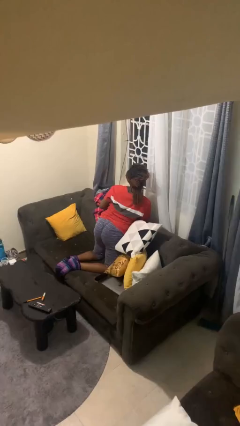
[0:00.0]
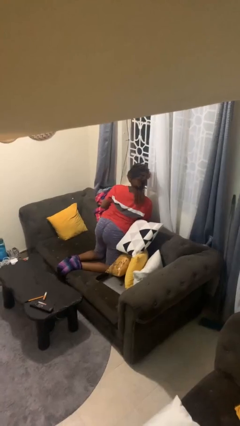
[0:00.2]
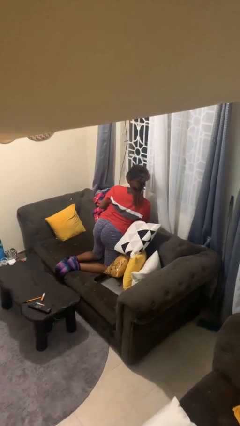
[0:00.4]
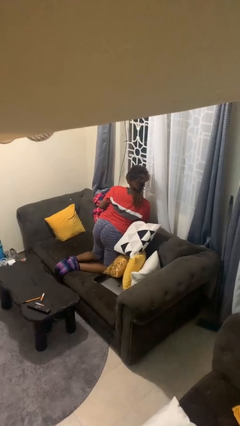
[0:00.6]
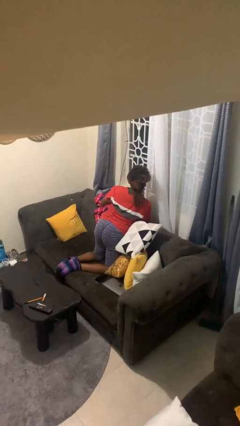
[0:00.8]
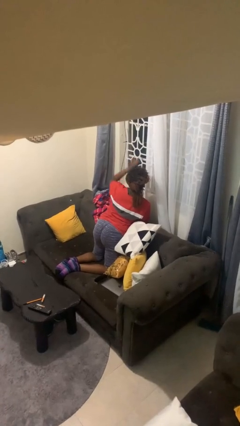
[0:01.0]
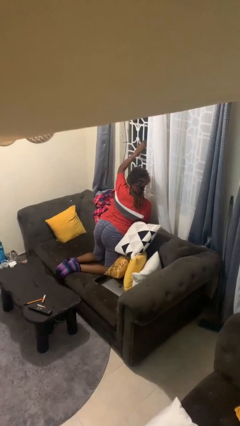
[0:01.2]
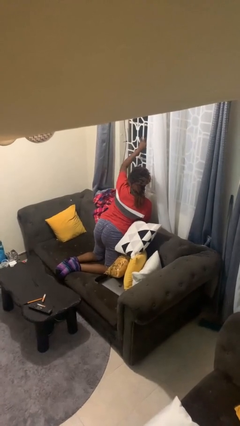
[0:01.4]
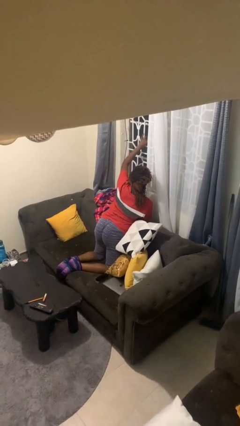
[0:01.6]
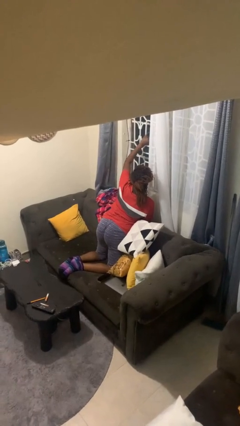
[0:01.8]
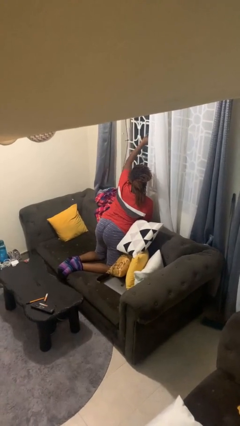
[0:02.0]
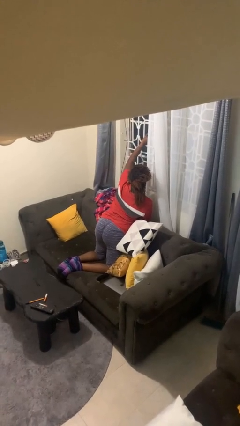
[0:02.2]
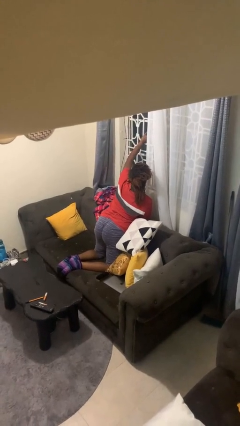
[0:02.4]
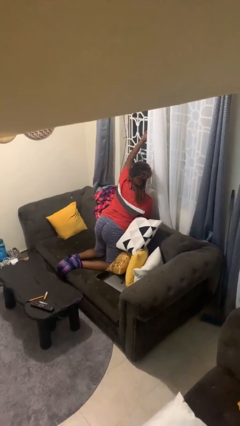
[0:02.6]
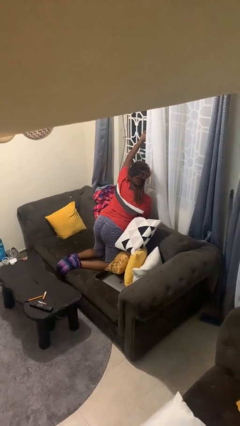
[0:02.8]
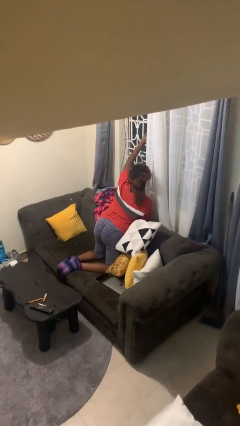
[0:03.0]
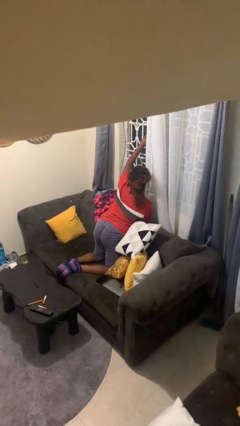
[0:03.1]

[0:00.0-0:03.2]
person opens home window

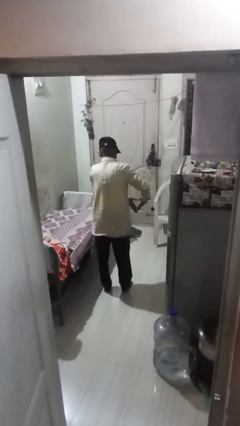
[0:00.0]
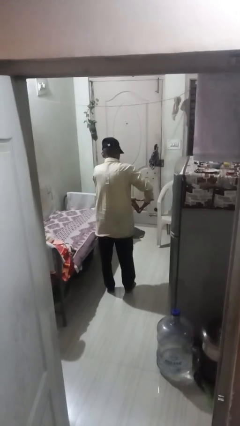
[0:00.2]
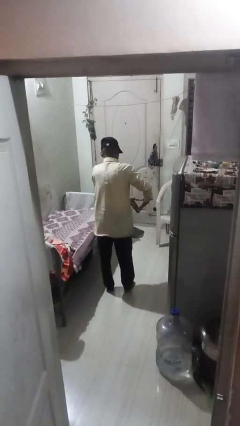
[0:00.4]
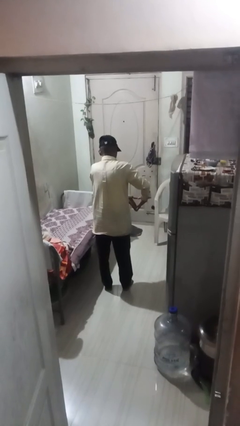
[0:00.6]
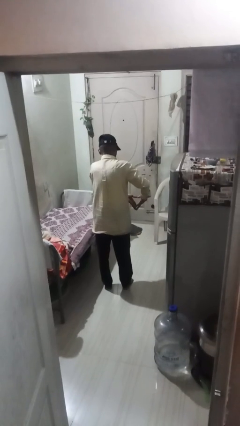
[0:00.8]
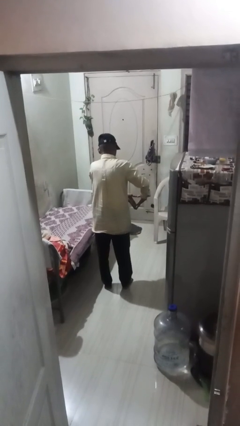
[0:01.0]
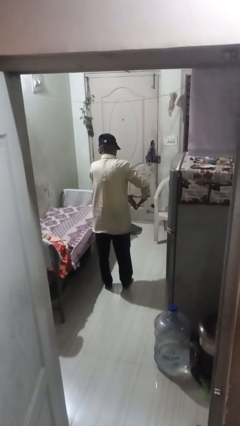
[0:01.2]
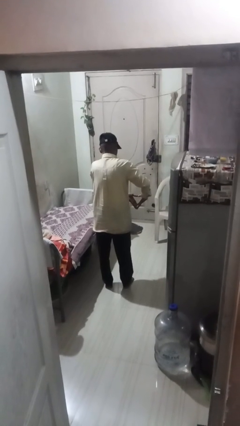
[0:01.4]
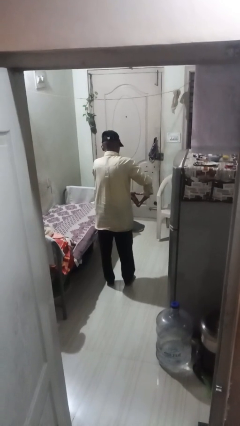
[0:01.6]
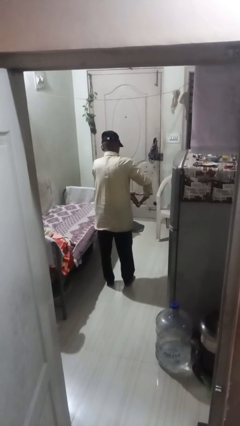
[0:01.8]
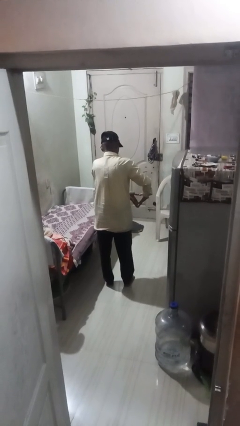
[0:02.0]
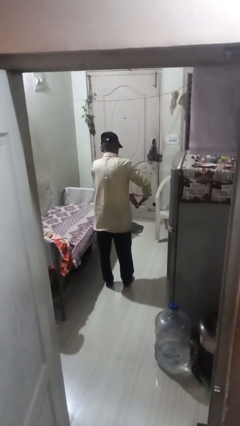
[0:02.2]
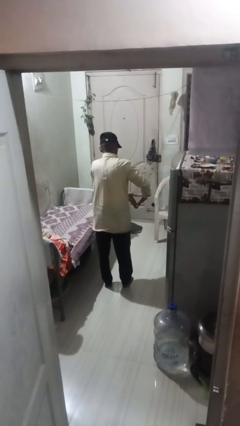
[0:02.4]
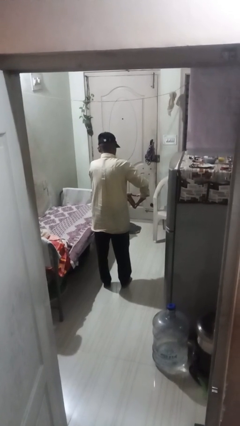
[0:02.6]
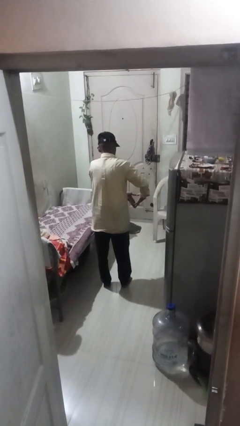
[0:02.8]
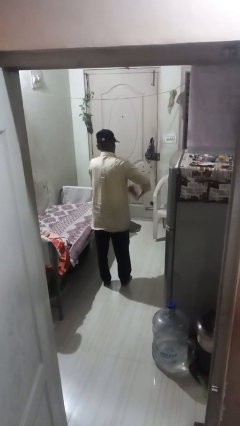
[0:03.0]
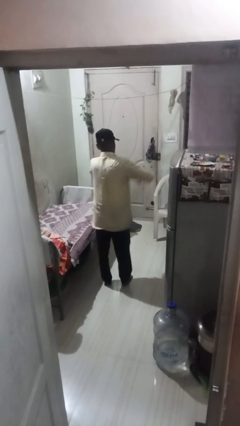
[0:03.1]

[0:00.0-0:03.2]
person gestures heart

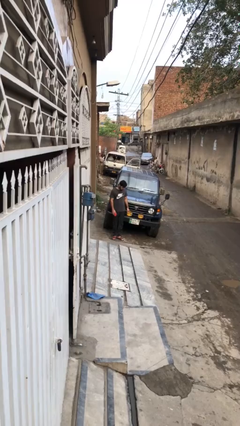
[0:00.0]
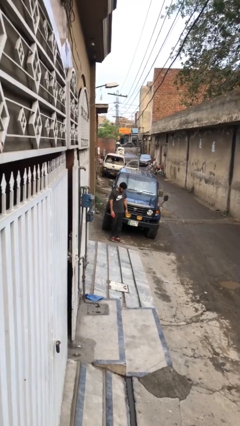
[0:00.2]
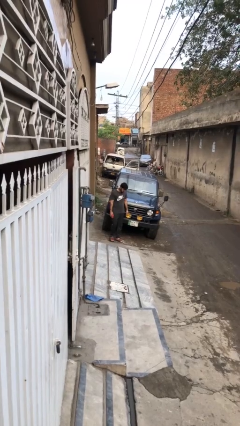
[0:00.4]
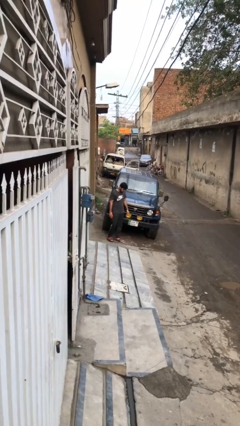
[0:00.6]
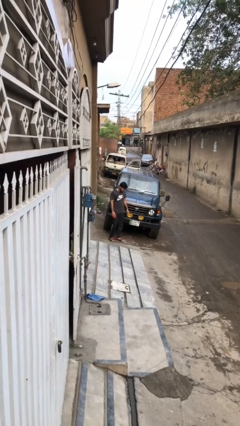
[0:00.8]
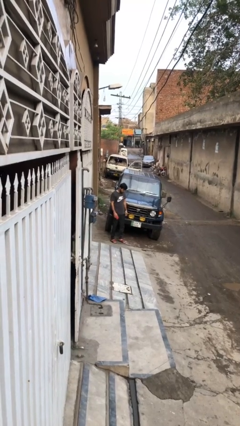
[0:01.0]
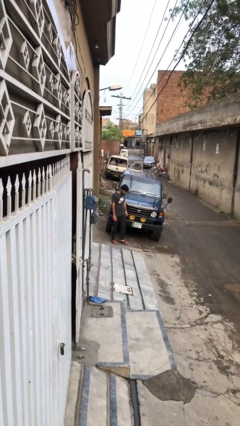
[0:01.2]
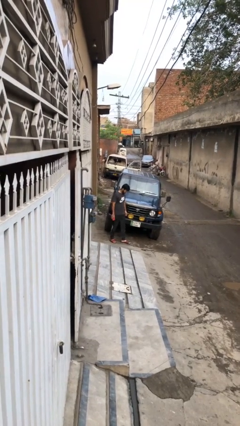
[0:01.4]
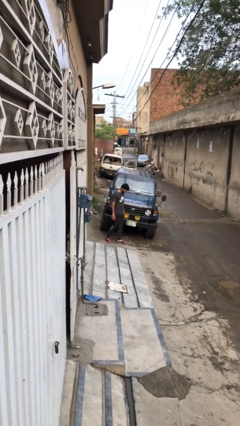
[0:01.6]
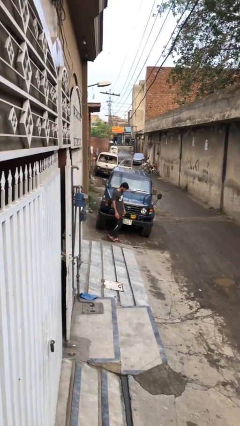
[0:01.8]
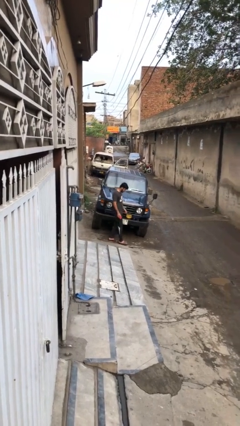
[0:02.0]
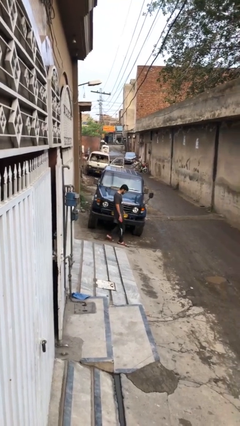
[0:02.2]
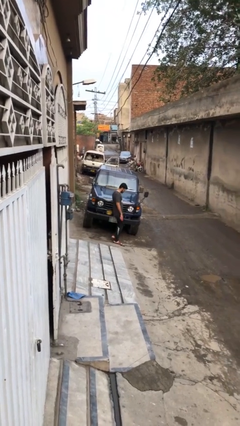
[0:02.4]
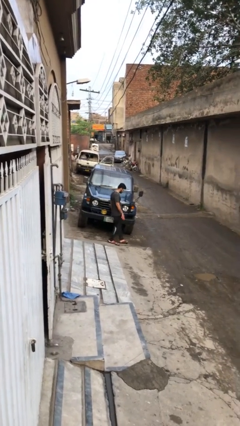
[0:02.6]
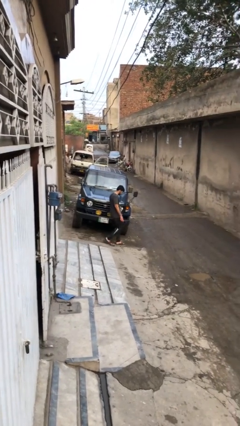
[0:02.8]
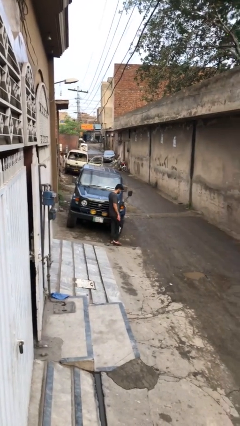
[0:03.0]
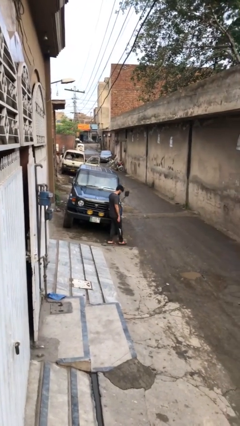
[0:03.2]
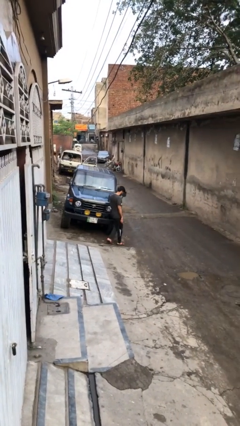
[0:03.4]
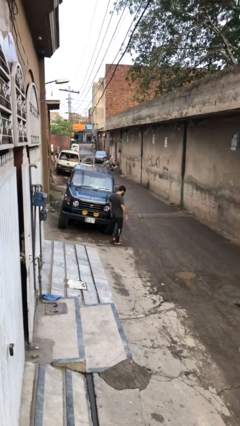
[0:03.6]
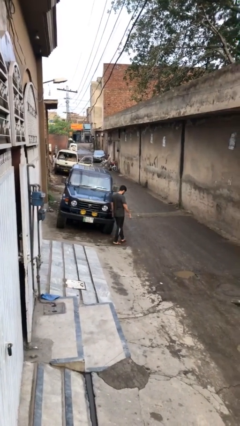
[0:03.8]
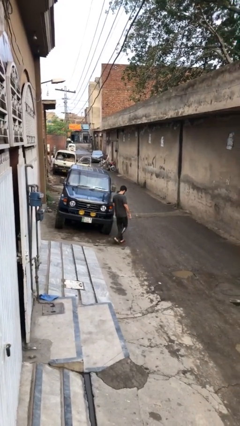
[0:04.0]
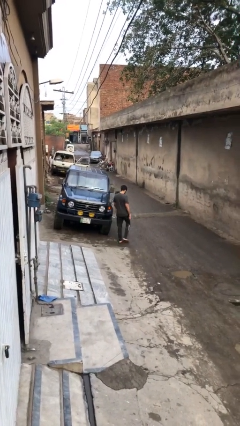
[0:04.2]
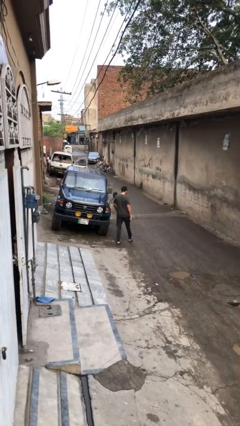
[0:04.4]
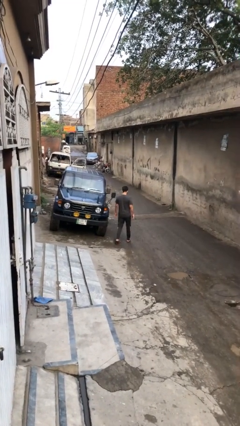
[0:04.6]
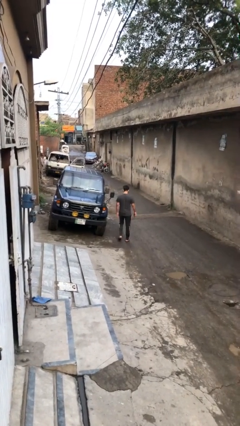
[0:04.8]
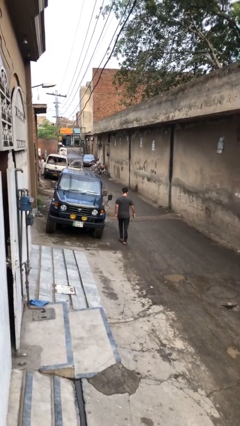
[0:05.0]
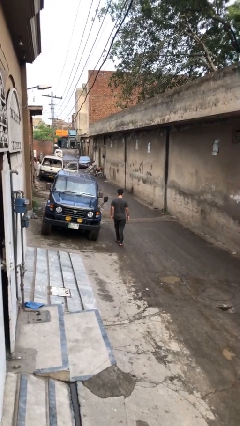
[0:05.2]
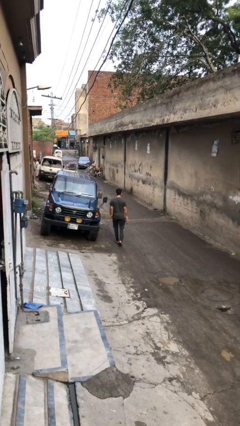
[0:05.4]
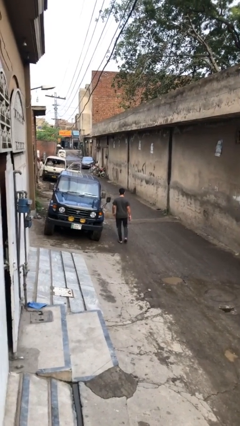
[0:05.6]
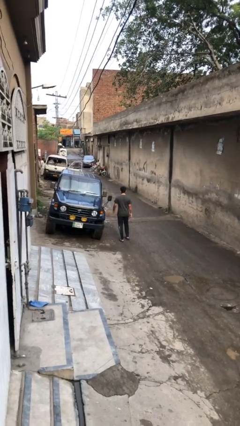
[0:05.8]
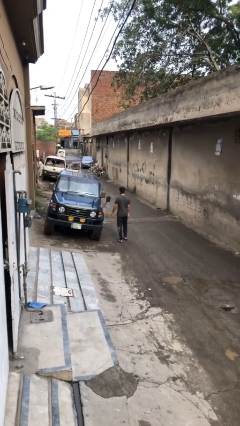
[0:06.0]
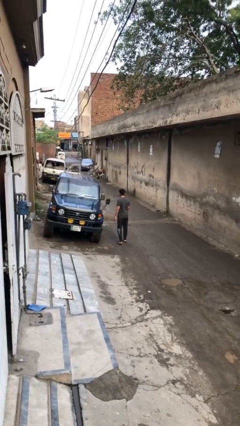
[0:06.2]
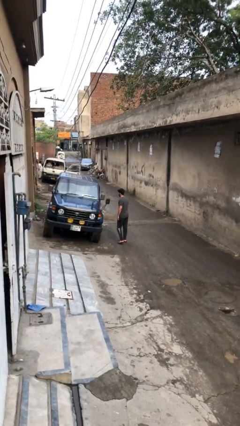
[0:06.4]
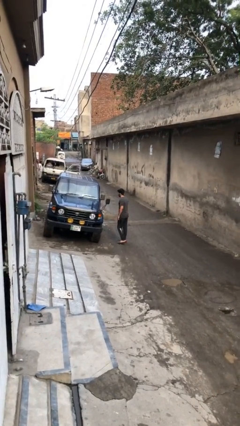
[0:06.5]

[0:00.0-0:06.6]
person walks around car

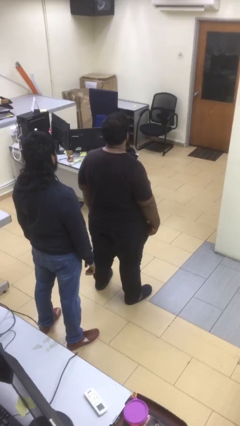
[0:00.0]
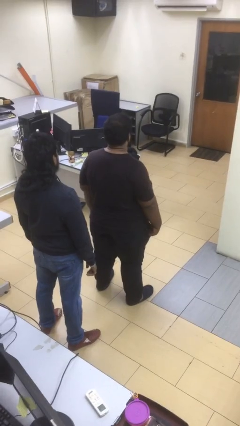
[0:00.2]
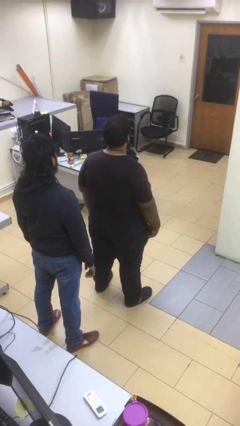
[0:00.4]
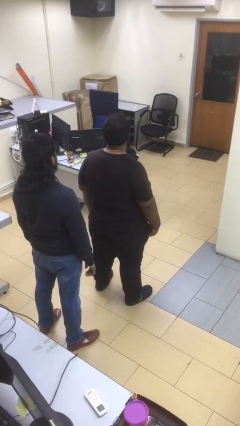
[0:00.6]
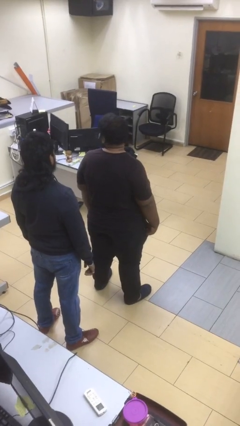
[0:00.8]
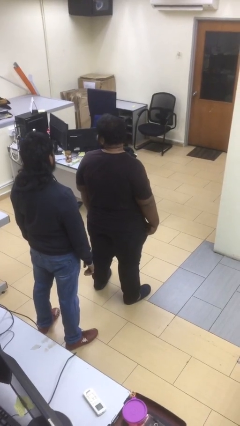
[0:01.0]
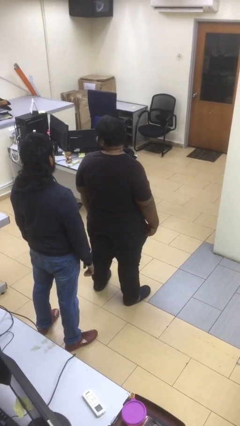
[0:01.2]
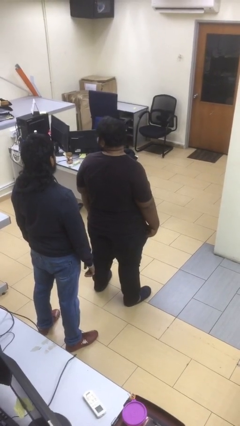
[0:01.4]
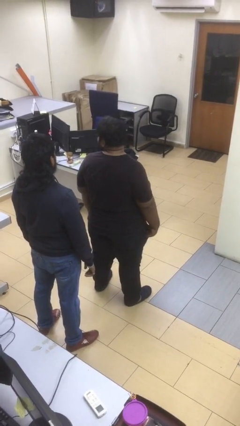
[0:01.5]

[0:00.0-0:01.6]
person looks over shoulder

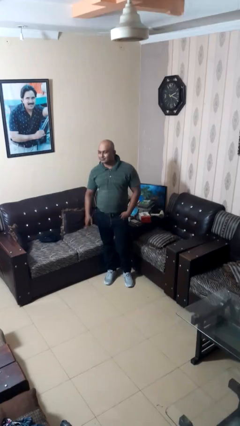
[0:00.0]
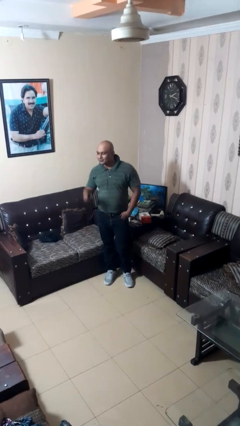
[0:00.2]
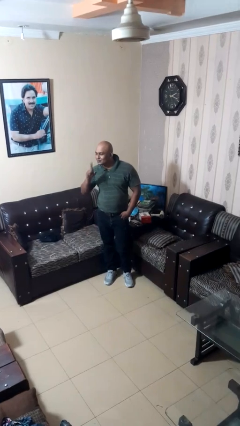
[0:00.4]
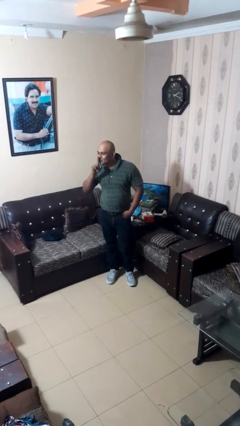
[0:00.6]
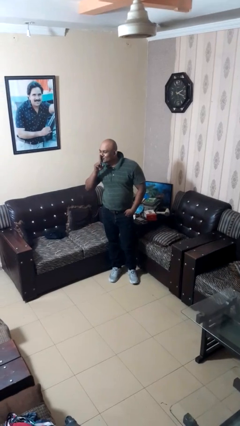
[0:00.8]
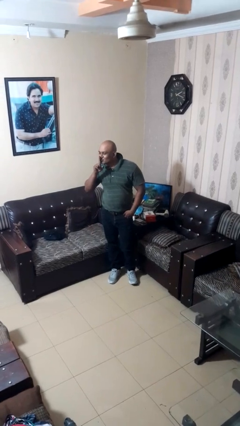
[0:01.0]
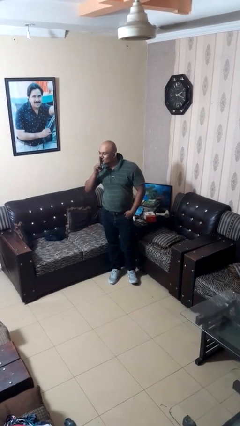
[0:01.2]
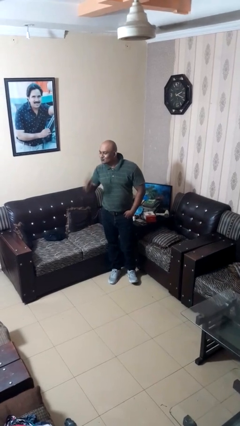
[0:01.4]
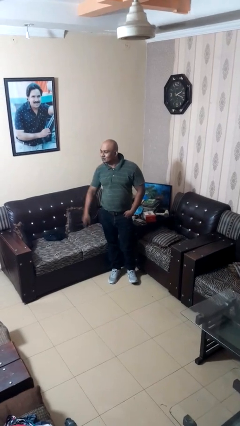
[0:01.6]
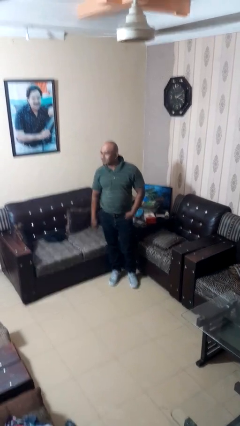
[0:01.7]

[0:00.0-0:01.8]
person gestures be quiet

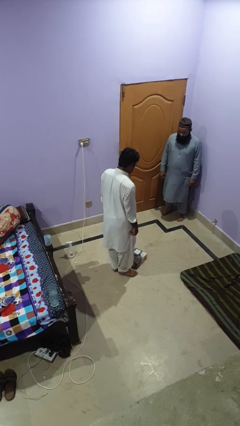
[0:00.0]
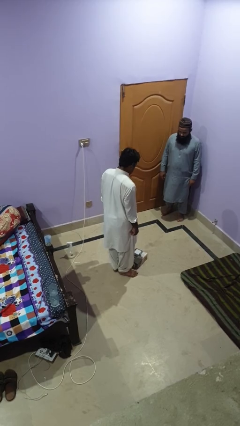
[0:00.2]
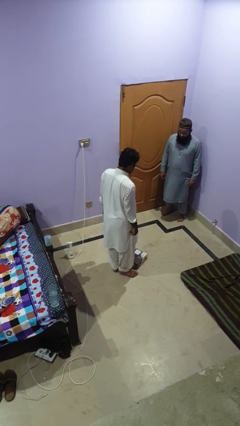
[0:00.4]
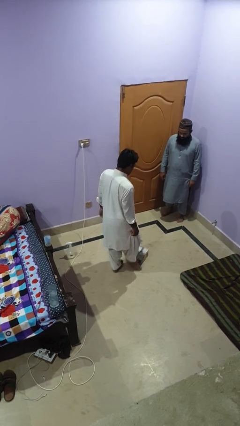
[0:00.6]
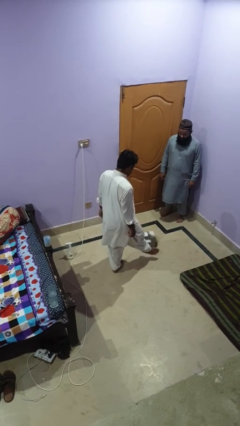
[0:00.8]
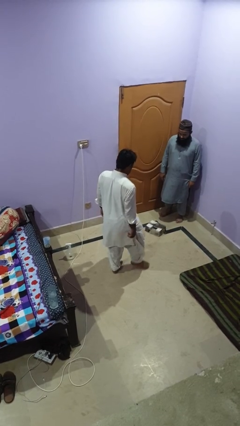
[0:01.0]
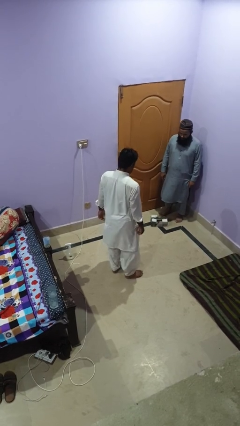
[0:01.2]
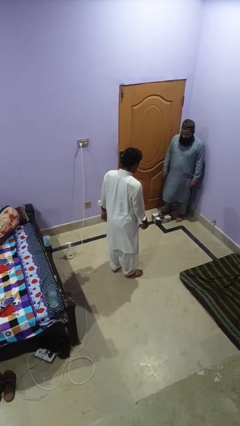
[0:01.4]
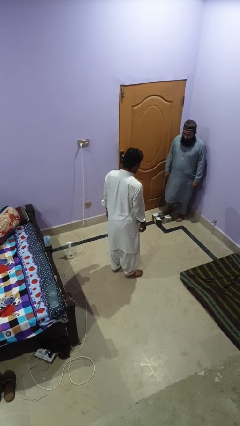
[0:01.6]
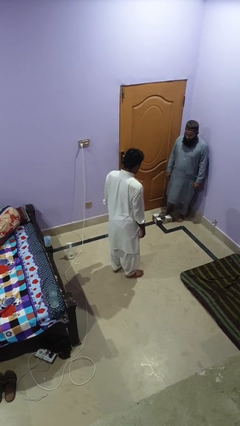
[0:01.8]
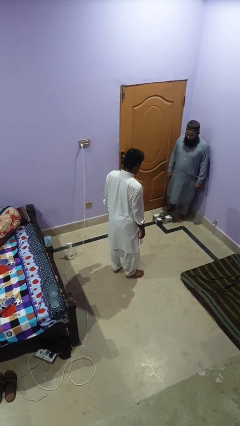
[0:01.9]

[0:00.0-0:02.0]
person kicks object to person
